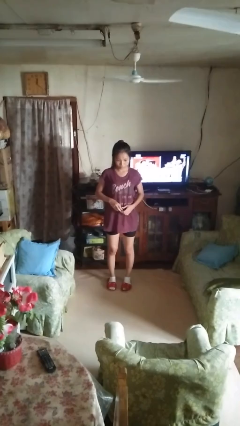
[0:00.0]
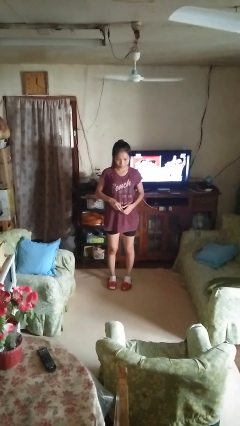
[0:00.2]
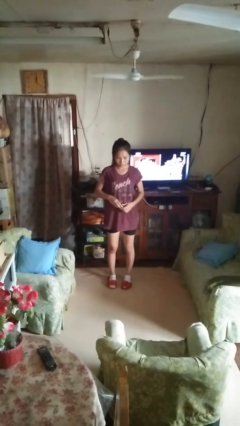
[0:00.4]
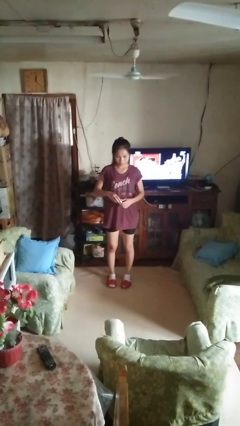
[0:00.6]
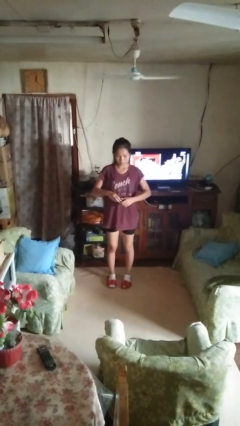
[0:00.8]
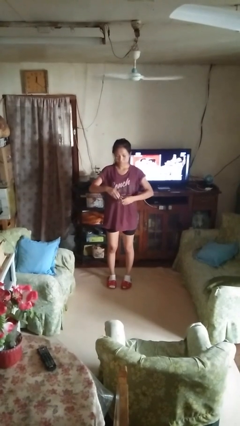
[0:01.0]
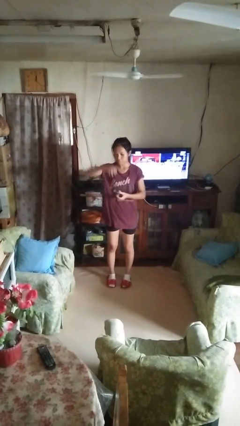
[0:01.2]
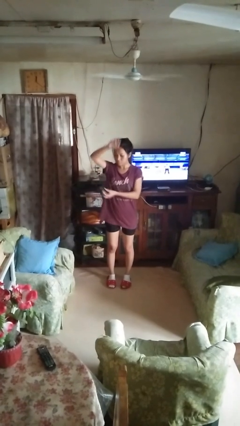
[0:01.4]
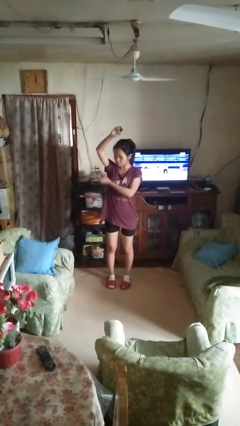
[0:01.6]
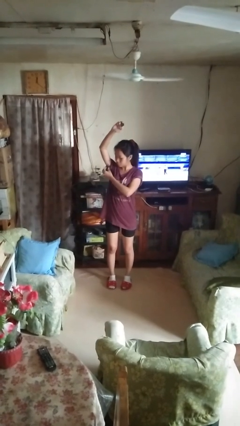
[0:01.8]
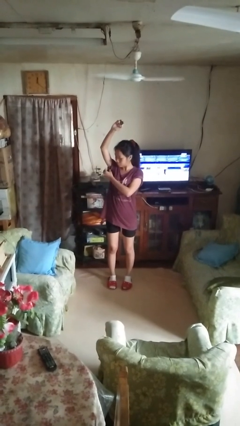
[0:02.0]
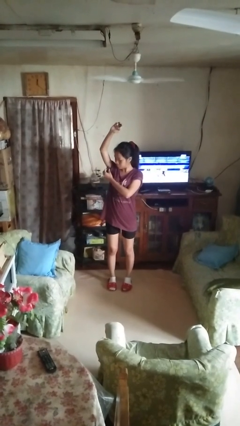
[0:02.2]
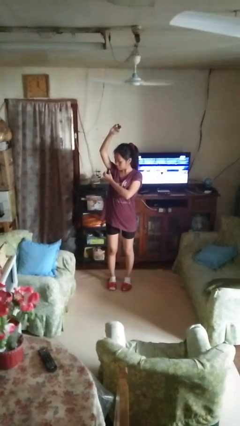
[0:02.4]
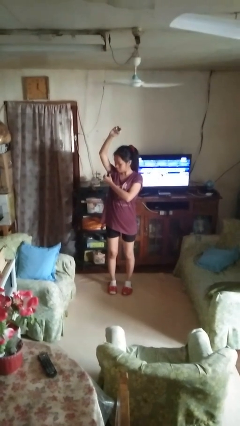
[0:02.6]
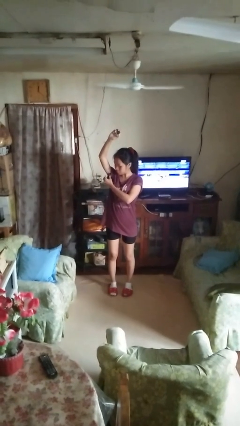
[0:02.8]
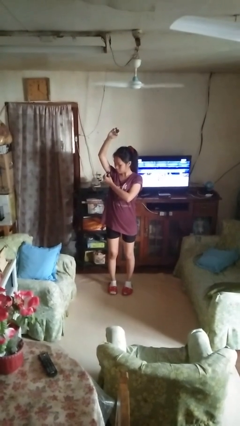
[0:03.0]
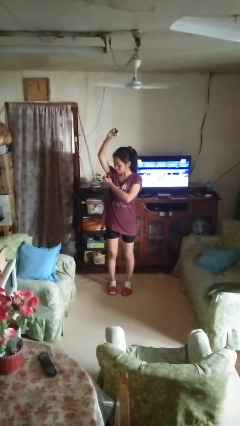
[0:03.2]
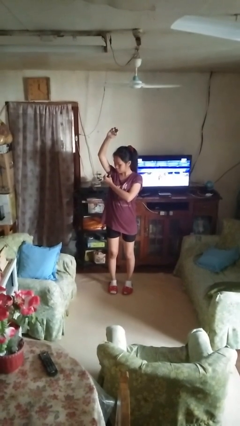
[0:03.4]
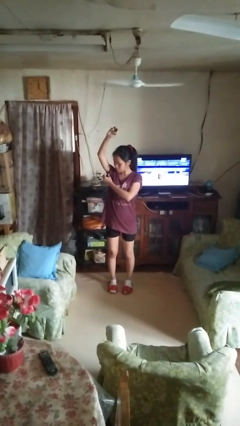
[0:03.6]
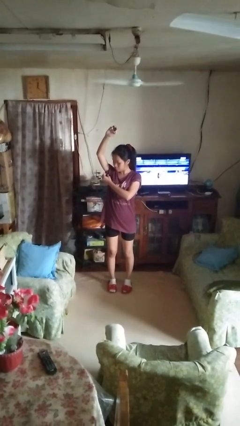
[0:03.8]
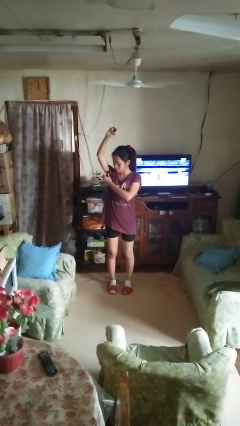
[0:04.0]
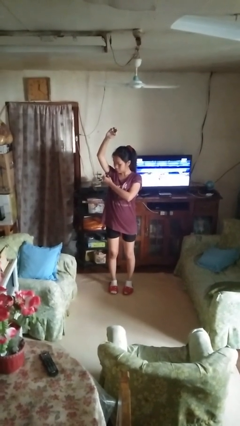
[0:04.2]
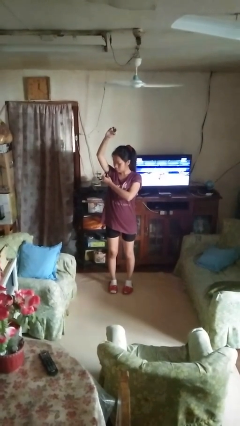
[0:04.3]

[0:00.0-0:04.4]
person applies deodorant

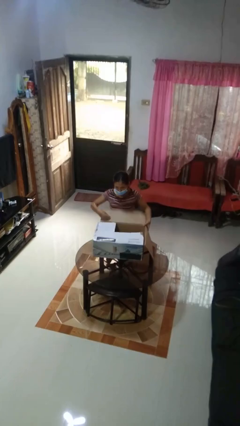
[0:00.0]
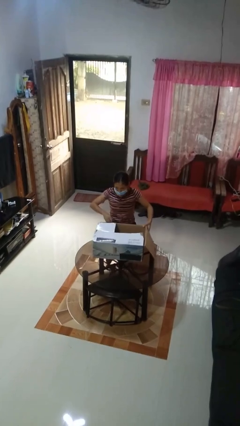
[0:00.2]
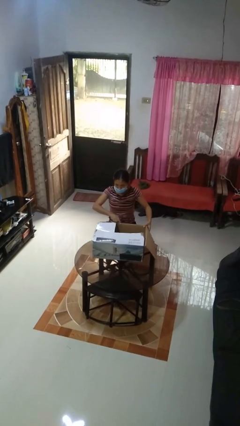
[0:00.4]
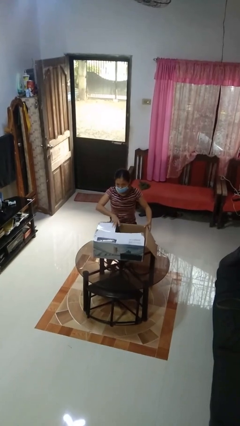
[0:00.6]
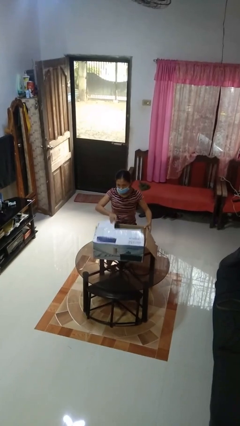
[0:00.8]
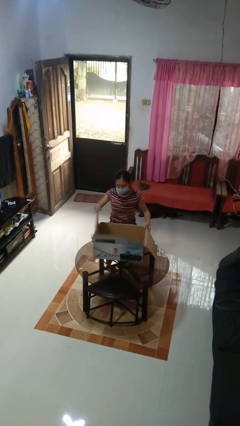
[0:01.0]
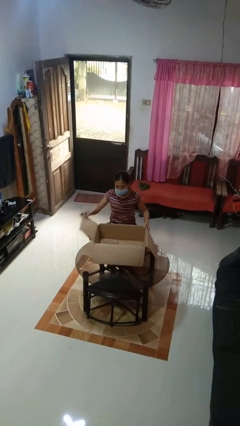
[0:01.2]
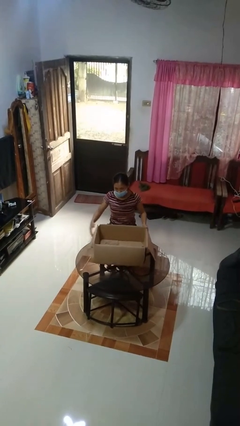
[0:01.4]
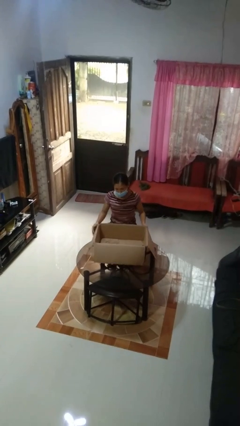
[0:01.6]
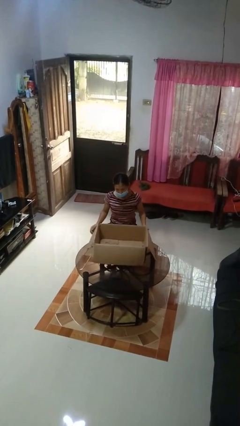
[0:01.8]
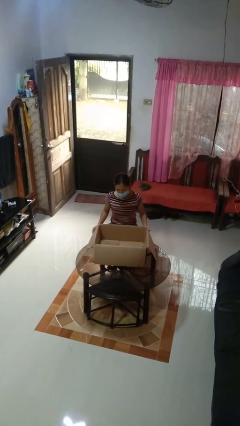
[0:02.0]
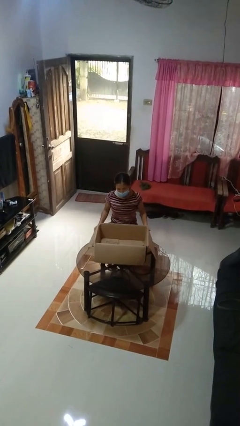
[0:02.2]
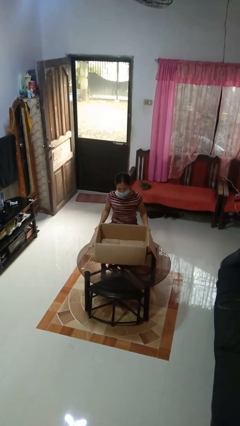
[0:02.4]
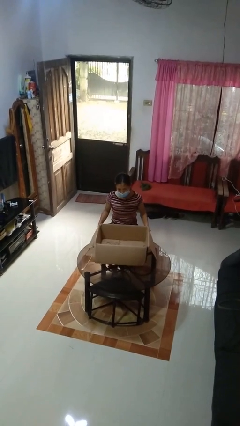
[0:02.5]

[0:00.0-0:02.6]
person opens box

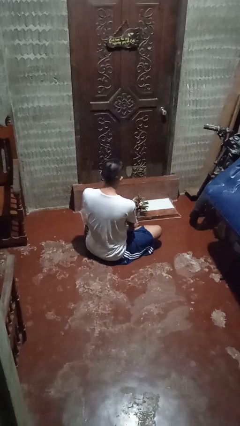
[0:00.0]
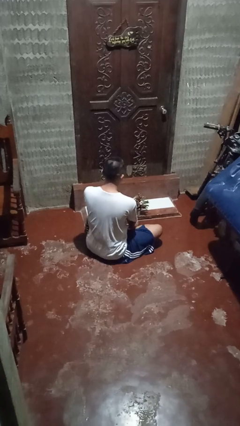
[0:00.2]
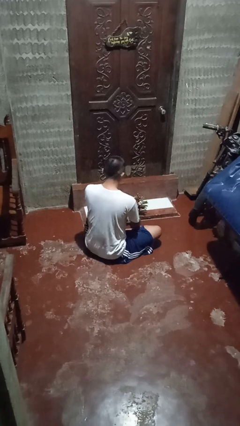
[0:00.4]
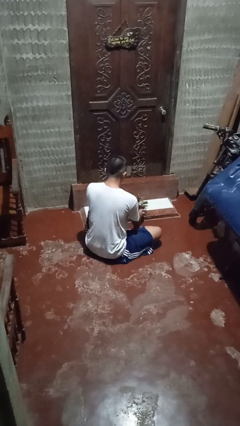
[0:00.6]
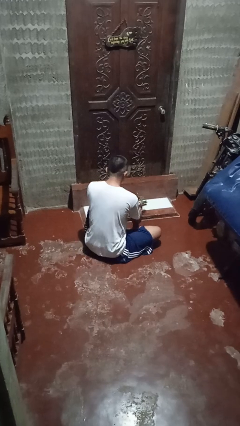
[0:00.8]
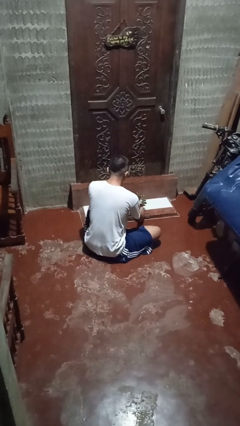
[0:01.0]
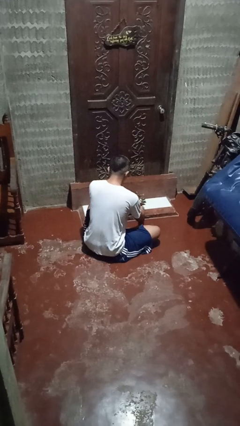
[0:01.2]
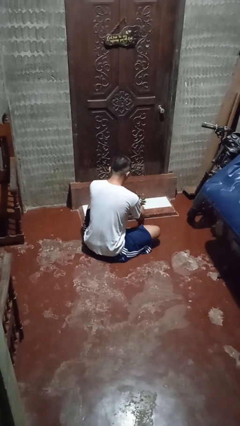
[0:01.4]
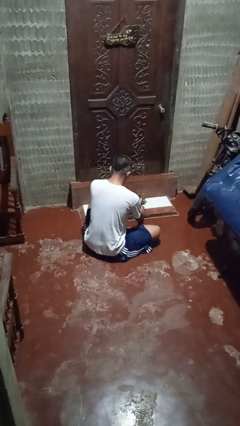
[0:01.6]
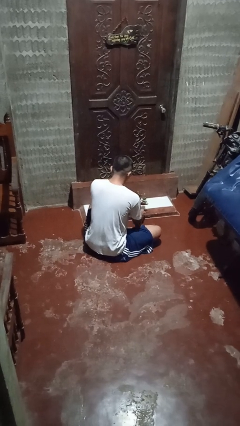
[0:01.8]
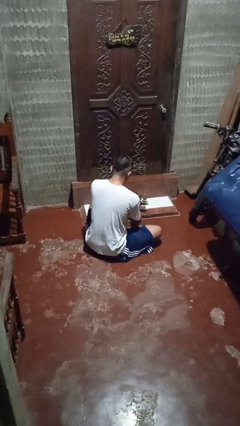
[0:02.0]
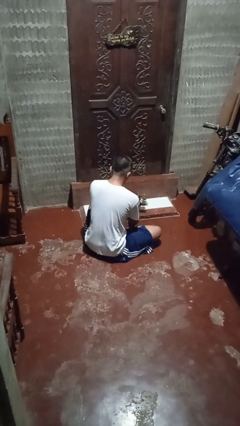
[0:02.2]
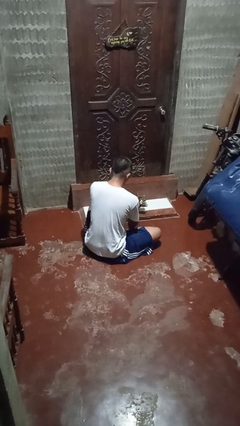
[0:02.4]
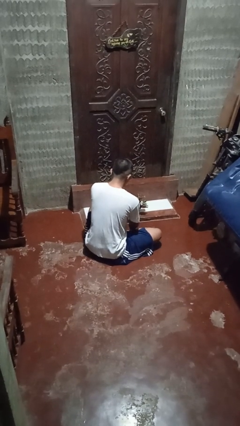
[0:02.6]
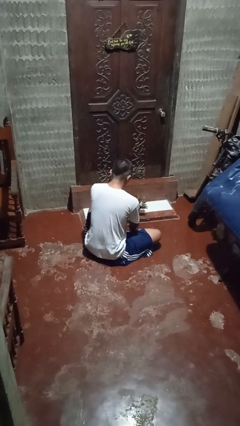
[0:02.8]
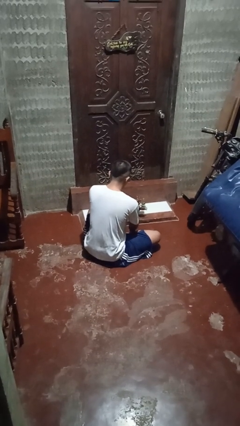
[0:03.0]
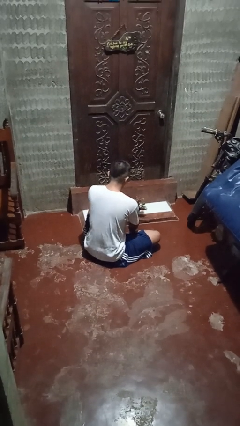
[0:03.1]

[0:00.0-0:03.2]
person arranges flowers in vase

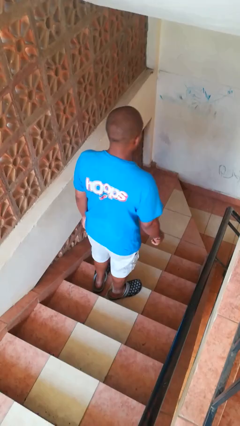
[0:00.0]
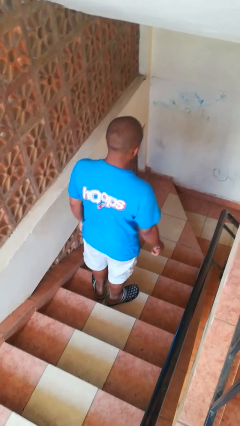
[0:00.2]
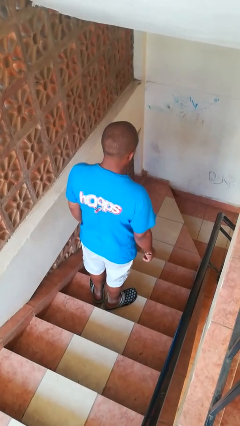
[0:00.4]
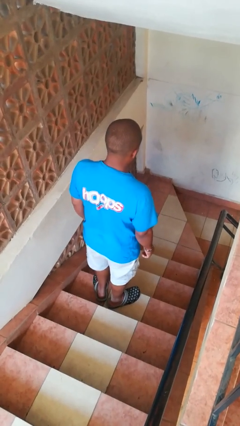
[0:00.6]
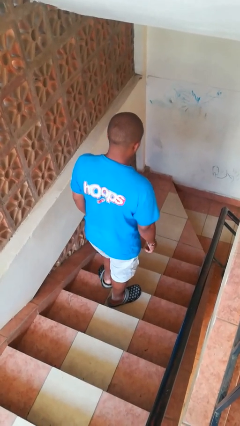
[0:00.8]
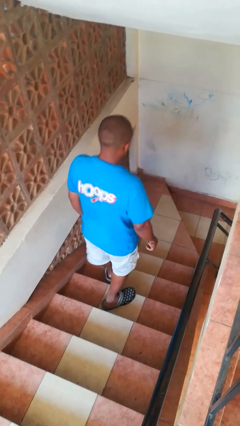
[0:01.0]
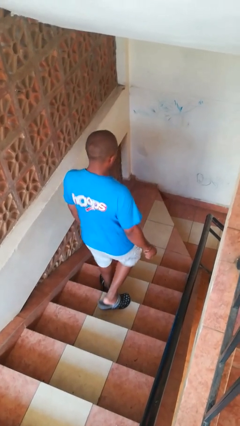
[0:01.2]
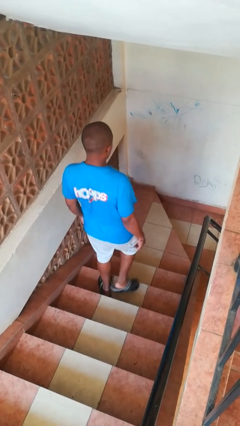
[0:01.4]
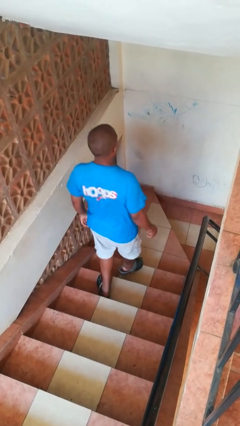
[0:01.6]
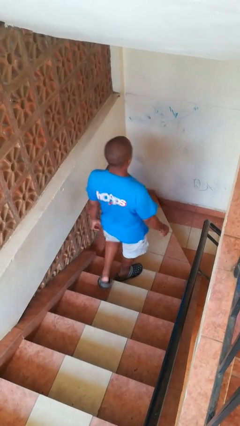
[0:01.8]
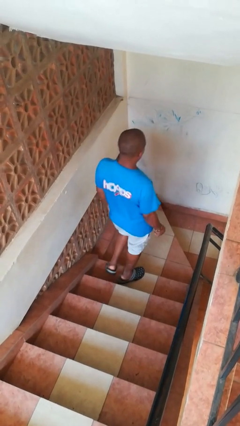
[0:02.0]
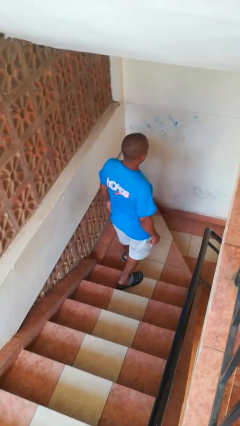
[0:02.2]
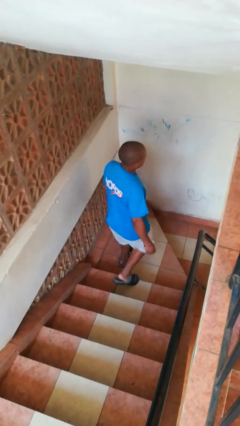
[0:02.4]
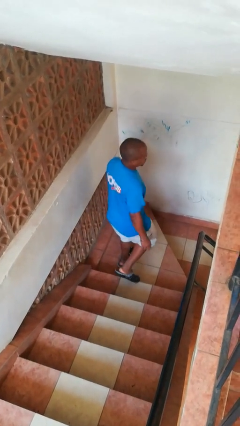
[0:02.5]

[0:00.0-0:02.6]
person climbs down stairs

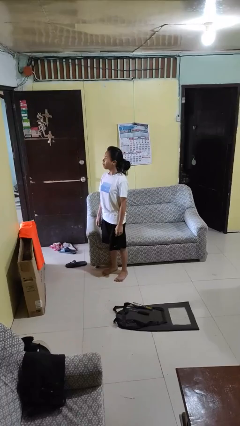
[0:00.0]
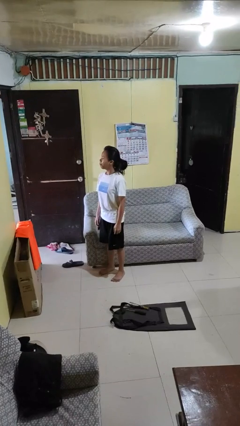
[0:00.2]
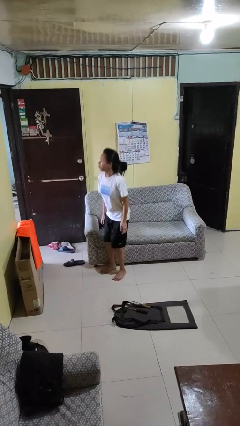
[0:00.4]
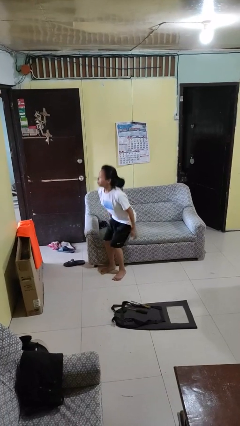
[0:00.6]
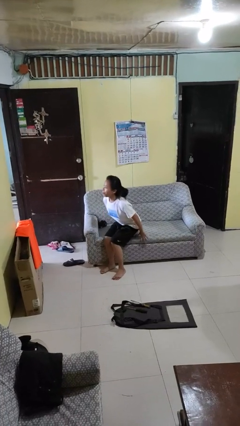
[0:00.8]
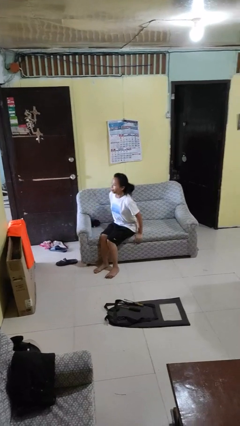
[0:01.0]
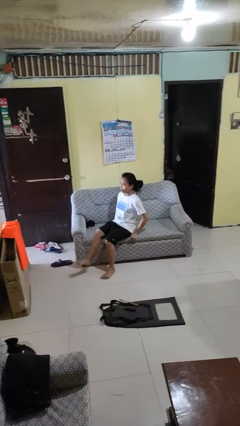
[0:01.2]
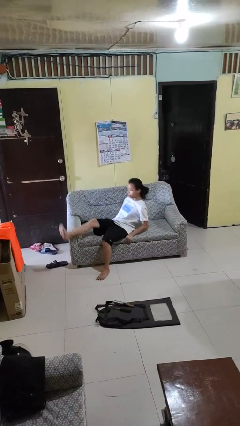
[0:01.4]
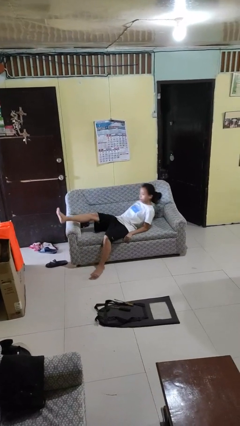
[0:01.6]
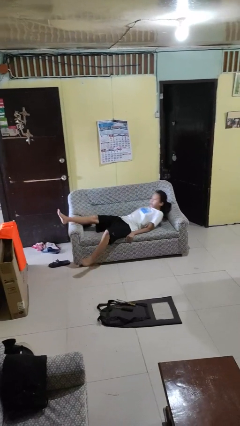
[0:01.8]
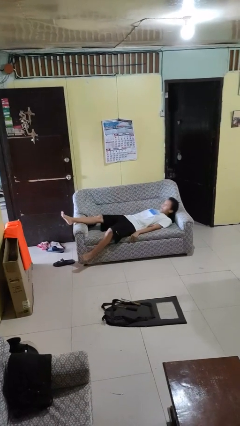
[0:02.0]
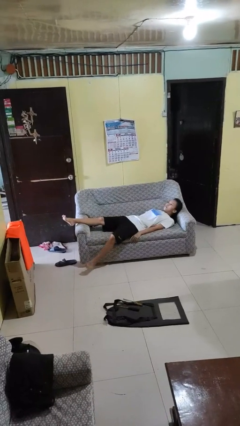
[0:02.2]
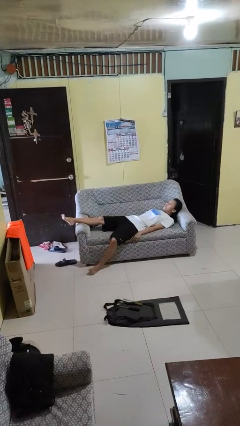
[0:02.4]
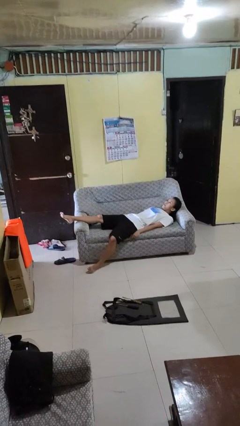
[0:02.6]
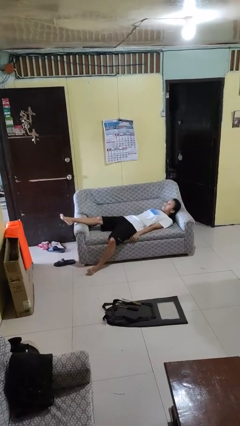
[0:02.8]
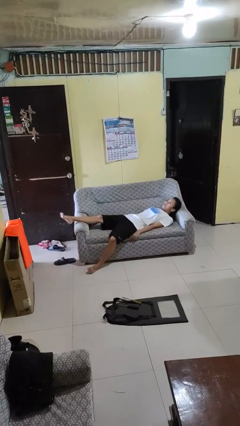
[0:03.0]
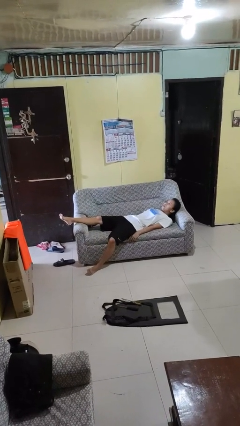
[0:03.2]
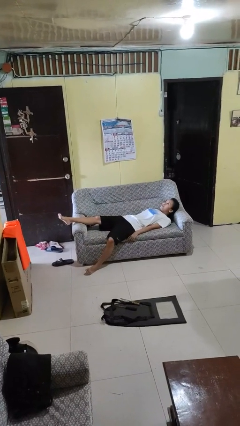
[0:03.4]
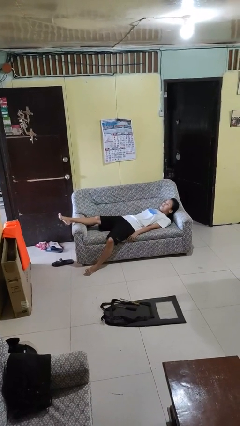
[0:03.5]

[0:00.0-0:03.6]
person lies down on couch

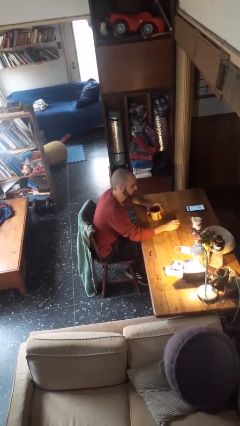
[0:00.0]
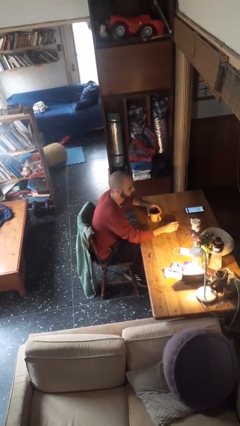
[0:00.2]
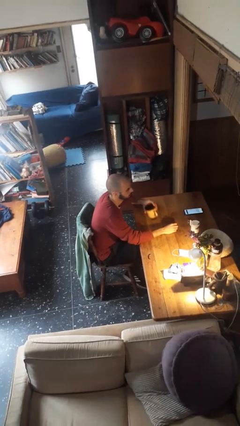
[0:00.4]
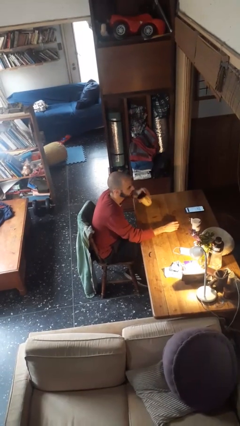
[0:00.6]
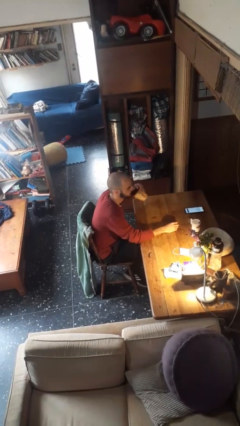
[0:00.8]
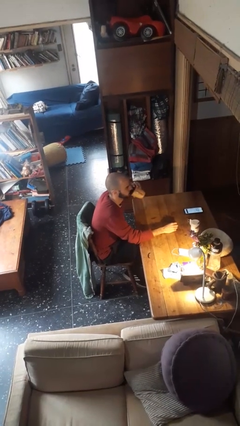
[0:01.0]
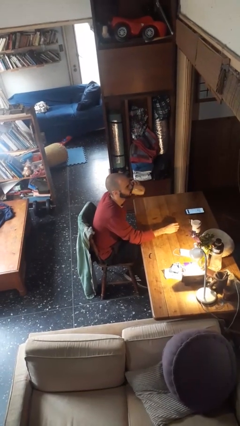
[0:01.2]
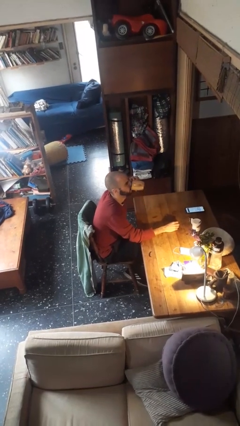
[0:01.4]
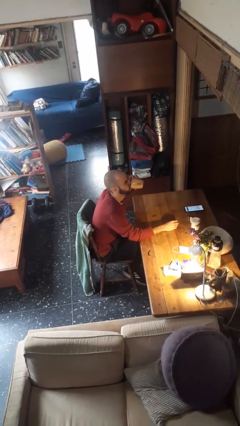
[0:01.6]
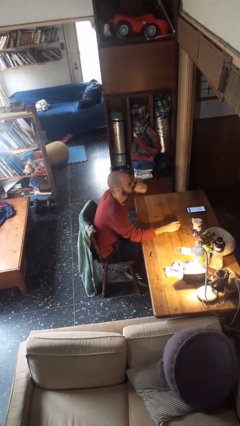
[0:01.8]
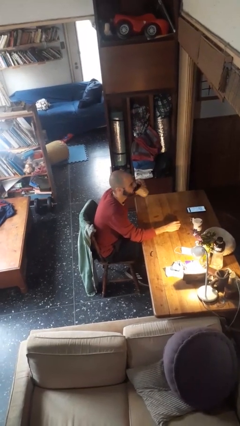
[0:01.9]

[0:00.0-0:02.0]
person drinks from mug
